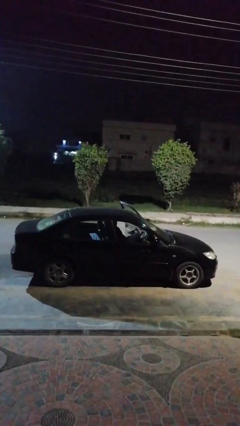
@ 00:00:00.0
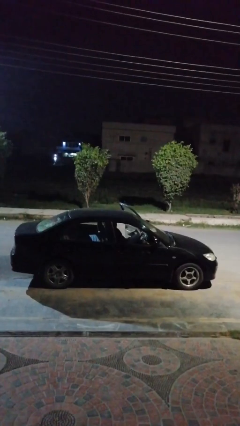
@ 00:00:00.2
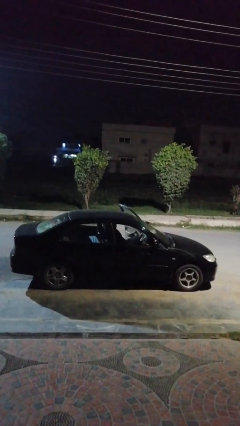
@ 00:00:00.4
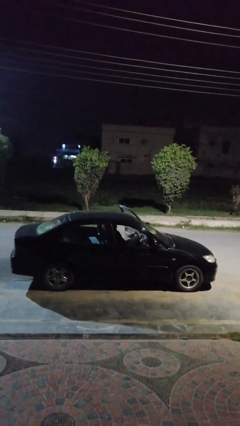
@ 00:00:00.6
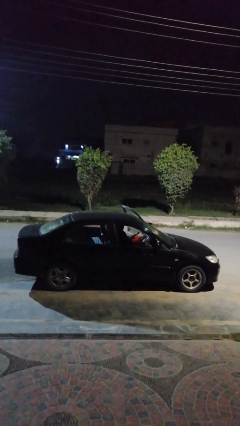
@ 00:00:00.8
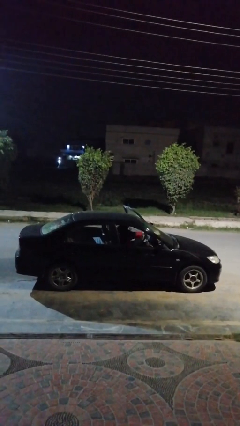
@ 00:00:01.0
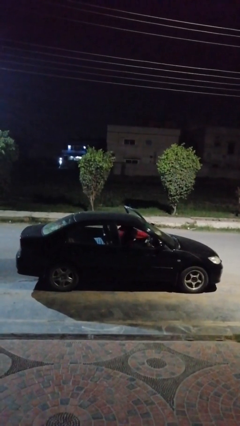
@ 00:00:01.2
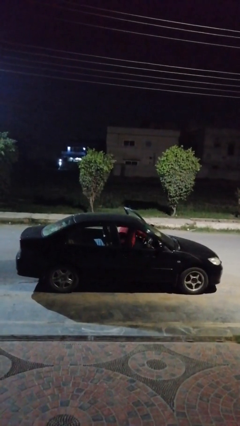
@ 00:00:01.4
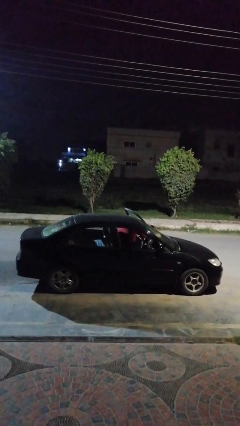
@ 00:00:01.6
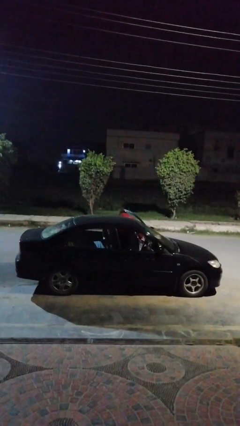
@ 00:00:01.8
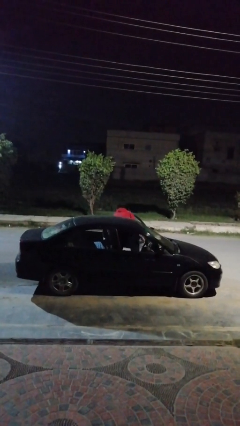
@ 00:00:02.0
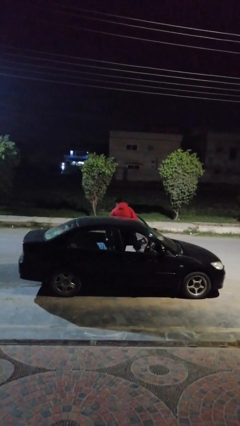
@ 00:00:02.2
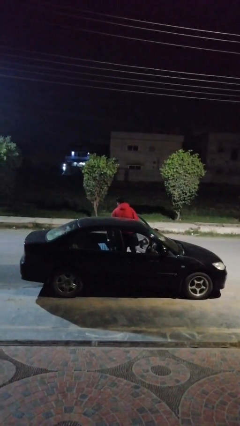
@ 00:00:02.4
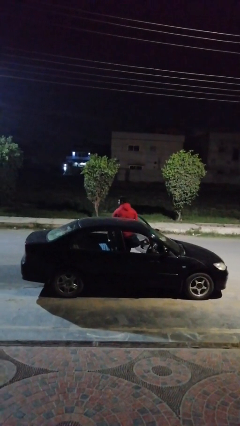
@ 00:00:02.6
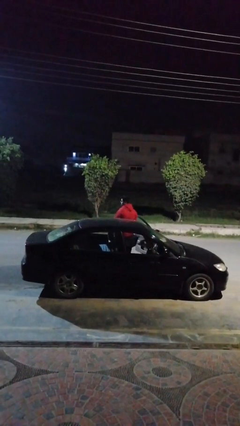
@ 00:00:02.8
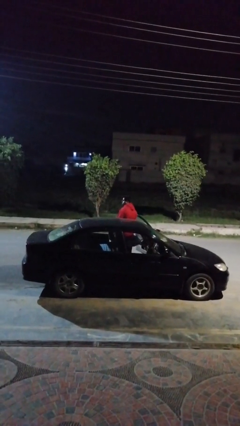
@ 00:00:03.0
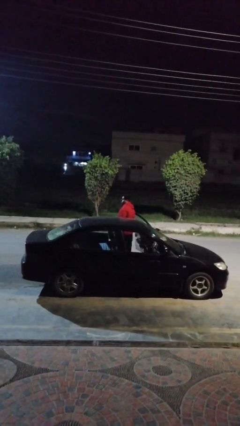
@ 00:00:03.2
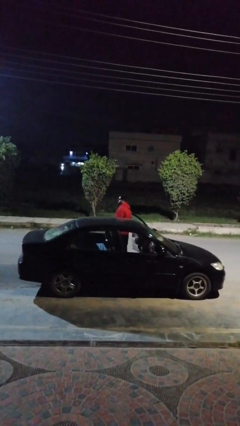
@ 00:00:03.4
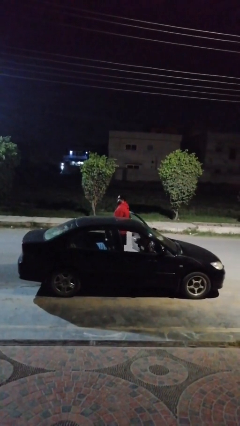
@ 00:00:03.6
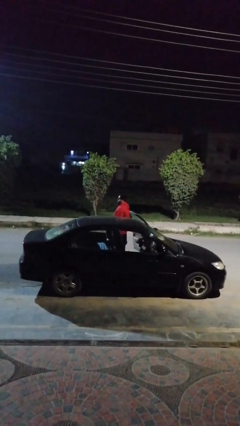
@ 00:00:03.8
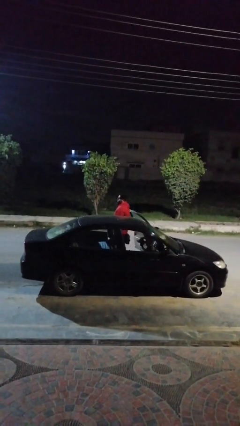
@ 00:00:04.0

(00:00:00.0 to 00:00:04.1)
person exits car

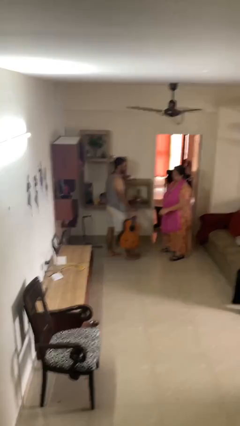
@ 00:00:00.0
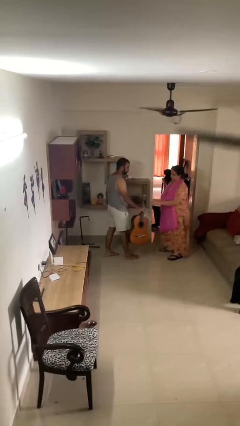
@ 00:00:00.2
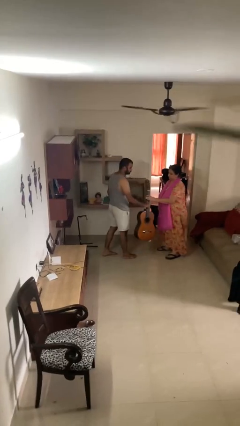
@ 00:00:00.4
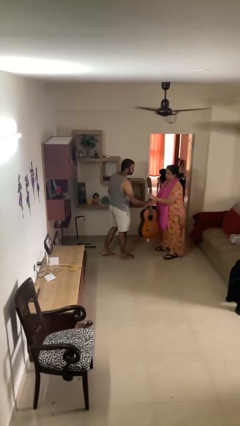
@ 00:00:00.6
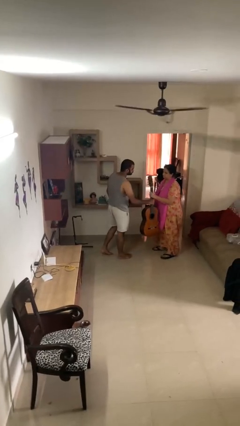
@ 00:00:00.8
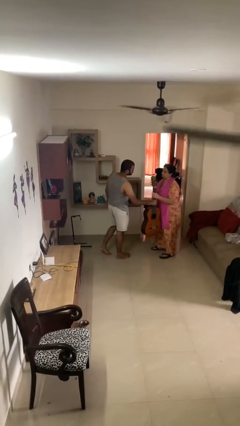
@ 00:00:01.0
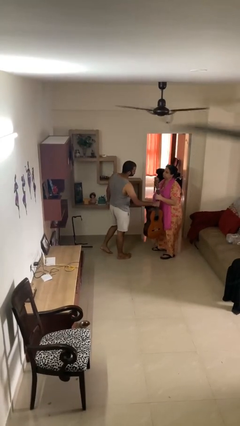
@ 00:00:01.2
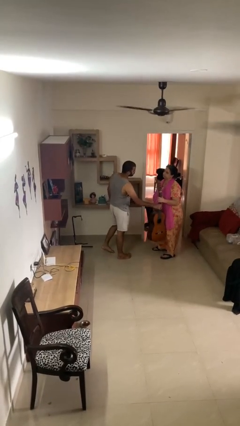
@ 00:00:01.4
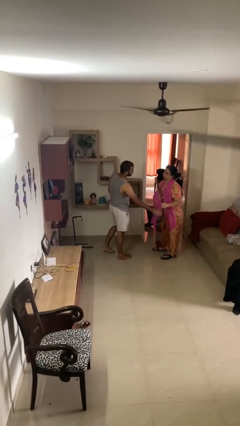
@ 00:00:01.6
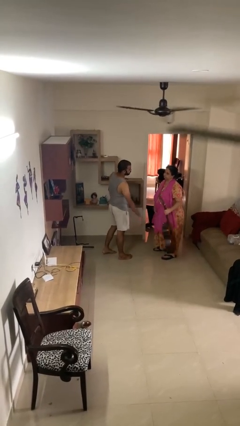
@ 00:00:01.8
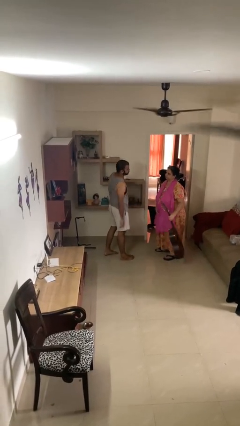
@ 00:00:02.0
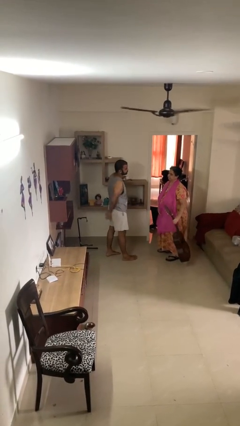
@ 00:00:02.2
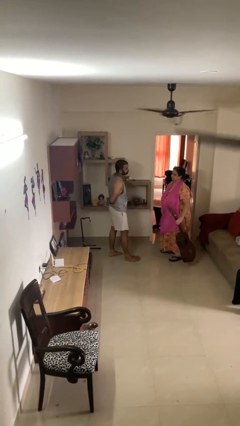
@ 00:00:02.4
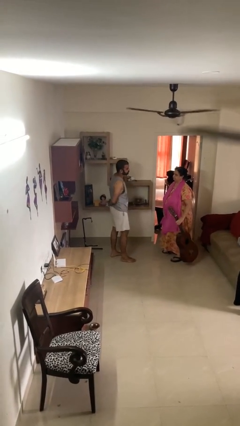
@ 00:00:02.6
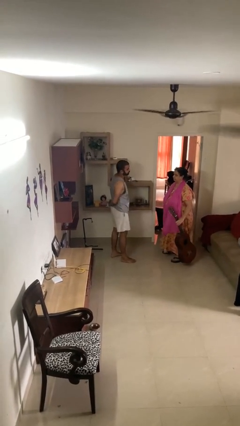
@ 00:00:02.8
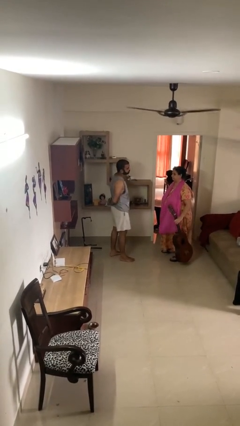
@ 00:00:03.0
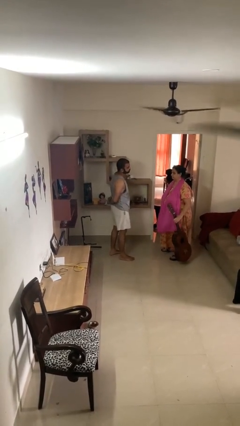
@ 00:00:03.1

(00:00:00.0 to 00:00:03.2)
person transfers object to person

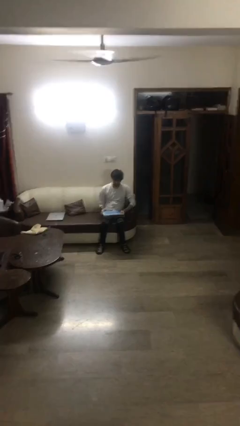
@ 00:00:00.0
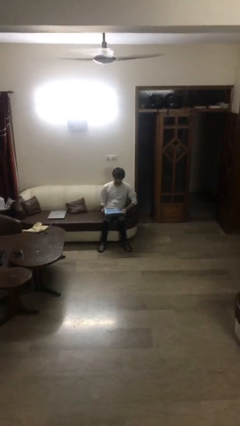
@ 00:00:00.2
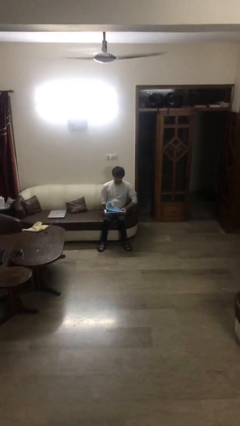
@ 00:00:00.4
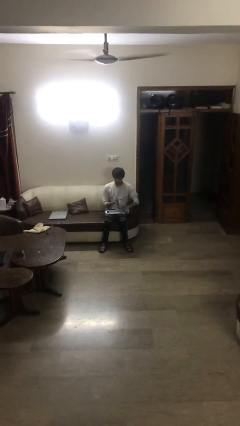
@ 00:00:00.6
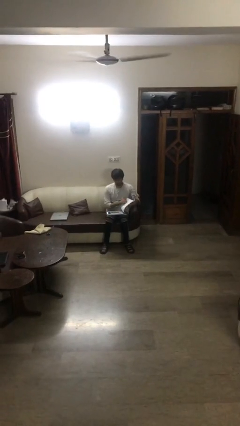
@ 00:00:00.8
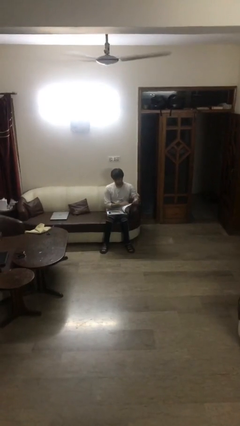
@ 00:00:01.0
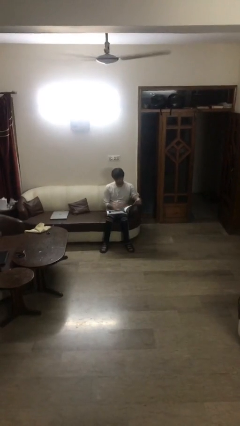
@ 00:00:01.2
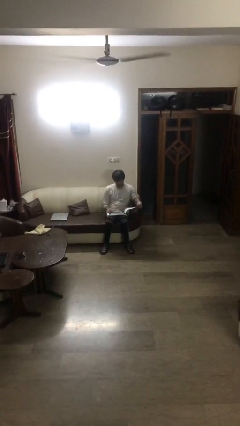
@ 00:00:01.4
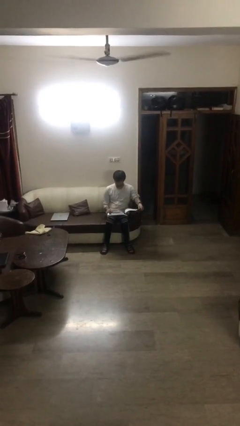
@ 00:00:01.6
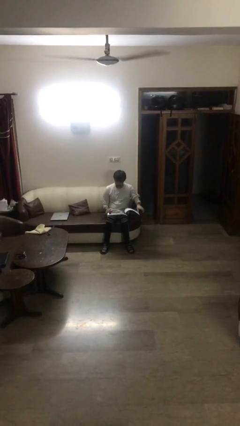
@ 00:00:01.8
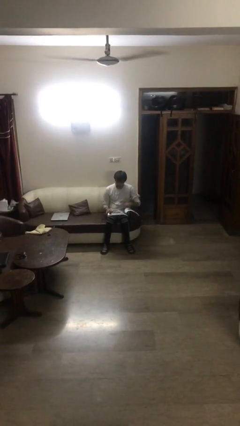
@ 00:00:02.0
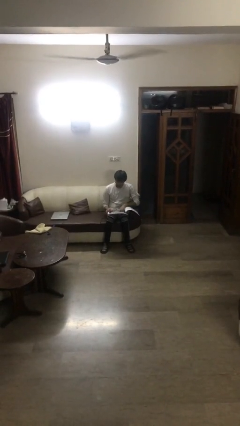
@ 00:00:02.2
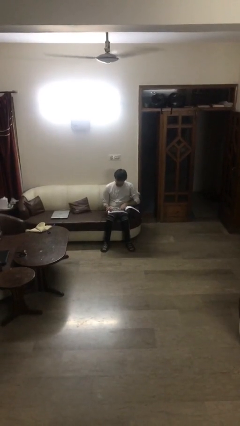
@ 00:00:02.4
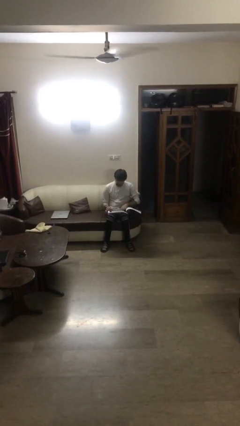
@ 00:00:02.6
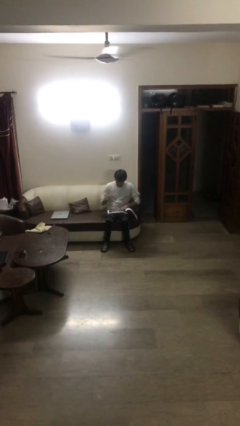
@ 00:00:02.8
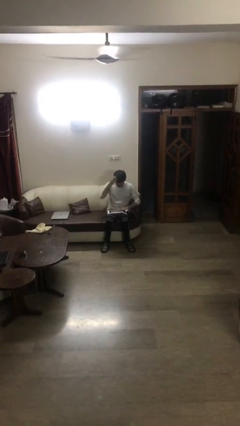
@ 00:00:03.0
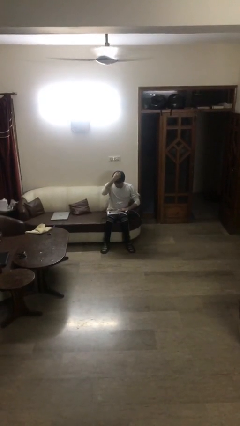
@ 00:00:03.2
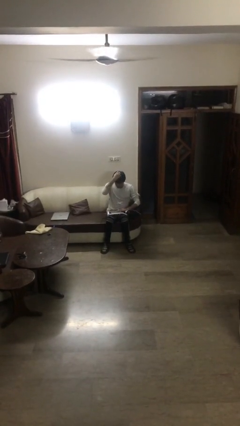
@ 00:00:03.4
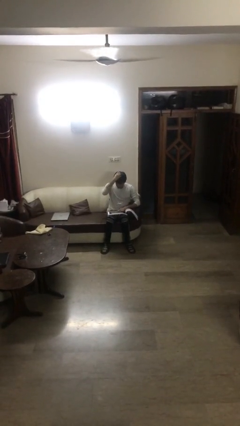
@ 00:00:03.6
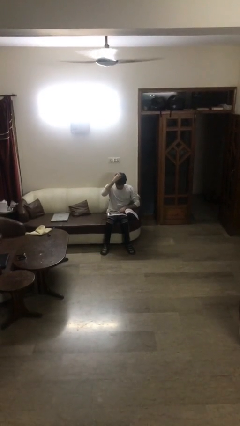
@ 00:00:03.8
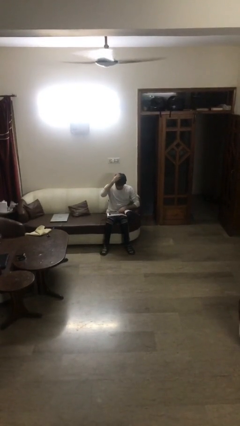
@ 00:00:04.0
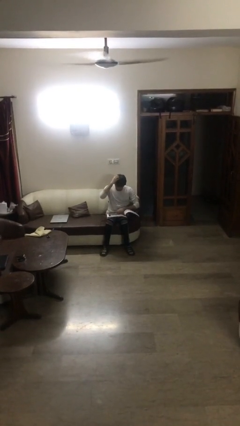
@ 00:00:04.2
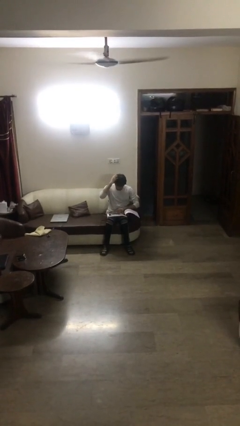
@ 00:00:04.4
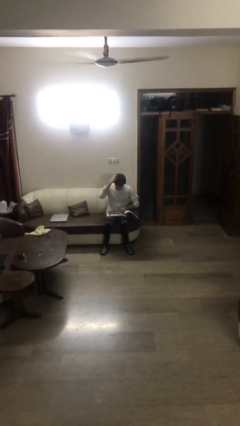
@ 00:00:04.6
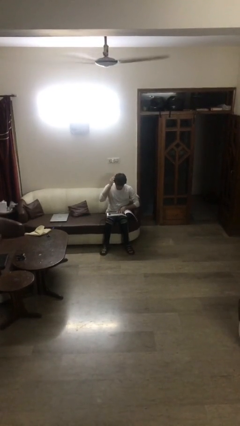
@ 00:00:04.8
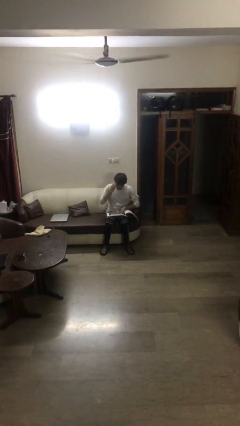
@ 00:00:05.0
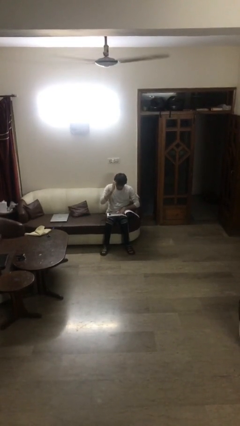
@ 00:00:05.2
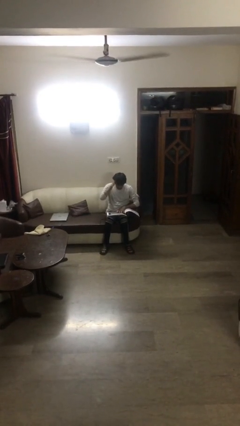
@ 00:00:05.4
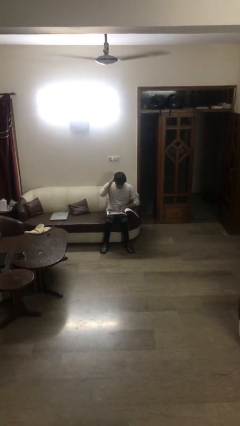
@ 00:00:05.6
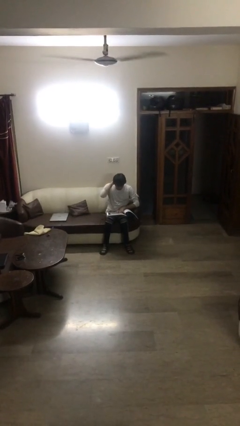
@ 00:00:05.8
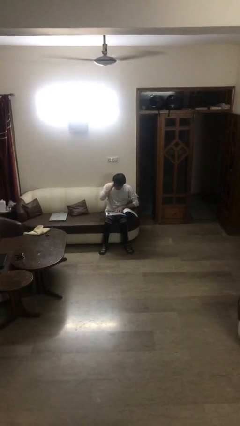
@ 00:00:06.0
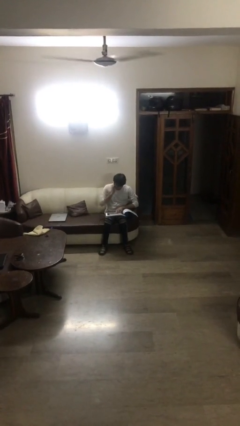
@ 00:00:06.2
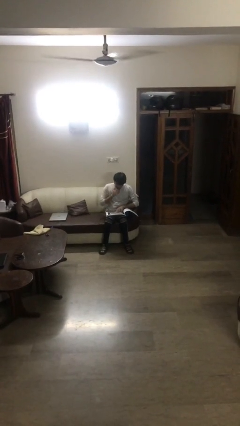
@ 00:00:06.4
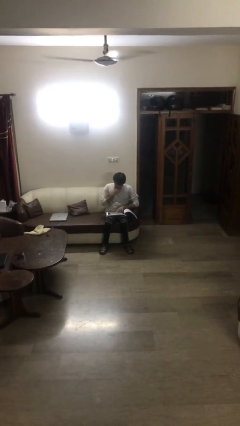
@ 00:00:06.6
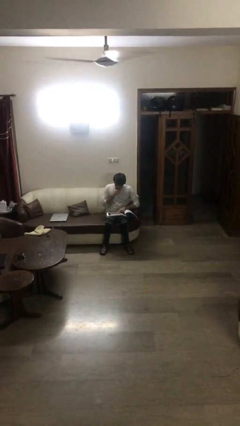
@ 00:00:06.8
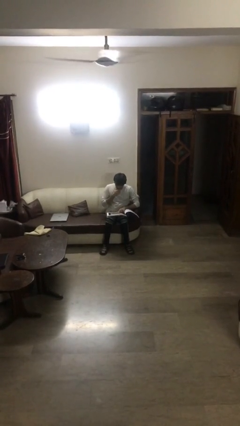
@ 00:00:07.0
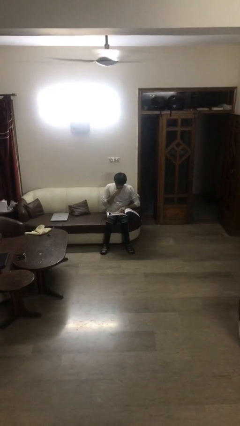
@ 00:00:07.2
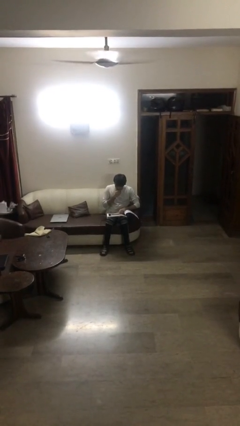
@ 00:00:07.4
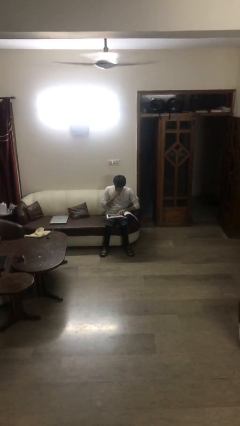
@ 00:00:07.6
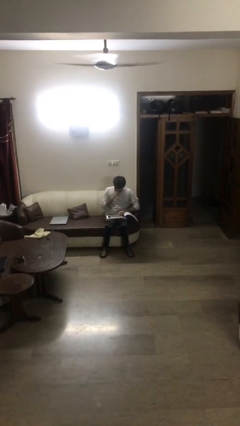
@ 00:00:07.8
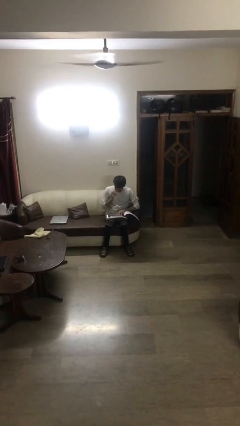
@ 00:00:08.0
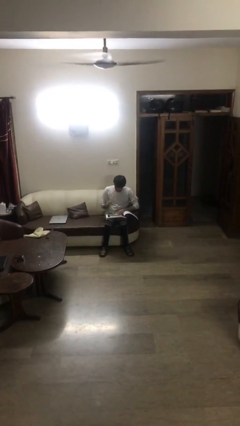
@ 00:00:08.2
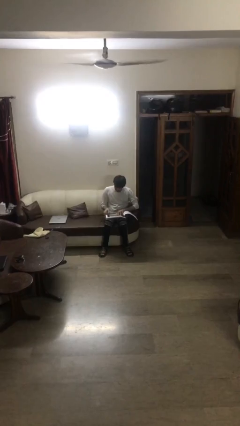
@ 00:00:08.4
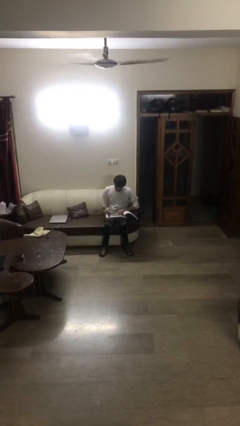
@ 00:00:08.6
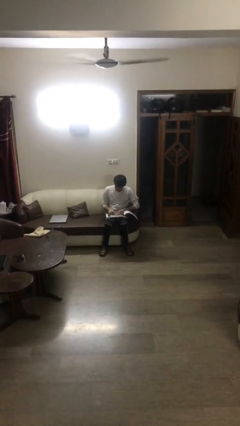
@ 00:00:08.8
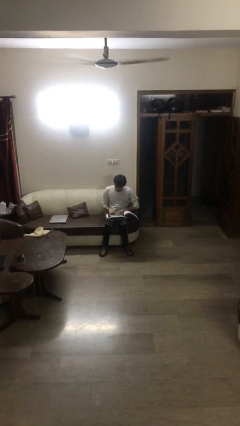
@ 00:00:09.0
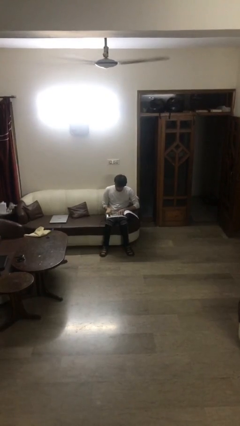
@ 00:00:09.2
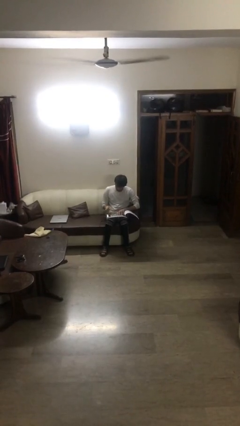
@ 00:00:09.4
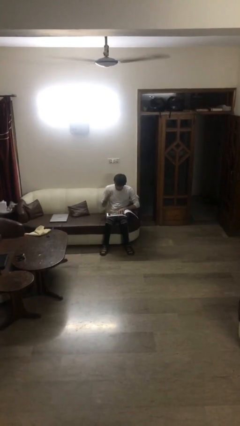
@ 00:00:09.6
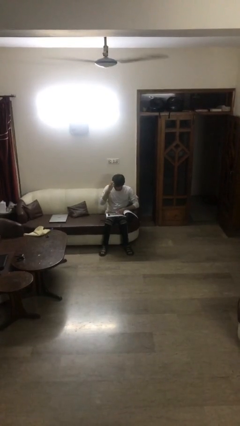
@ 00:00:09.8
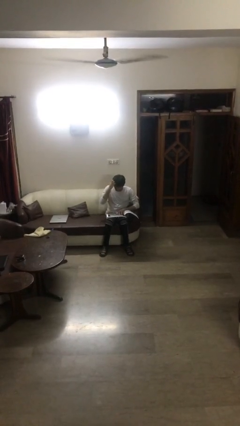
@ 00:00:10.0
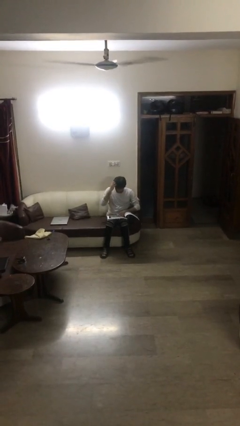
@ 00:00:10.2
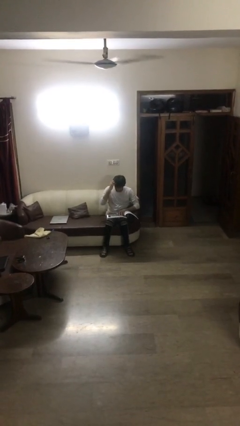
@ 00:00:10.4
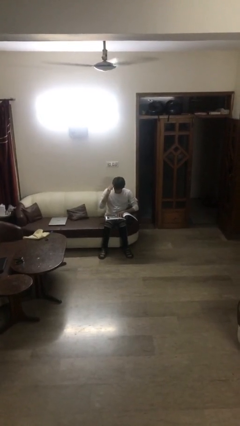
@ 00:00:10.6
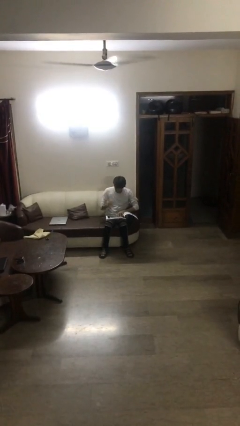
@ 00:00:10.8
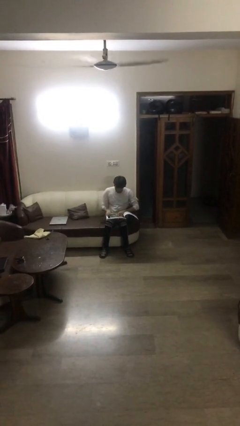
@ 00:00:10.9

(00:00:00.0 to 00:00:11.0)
person reads document
